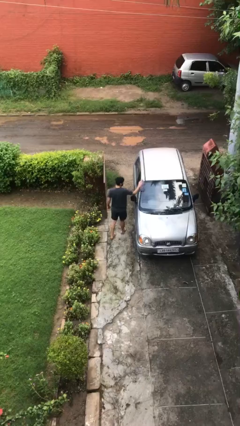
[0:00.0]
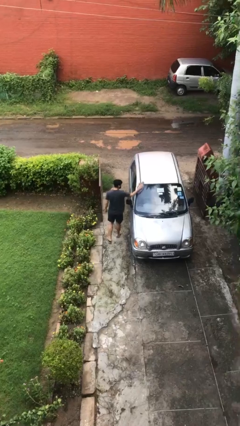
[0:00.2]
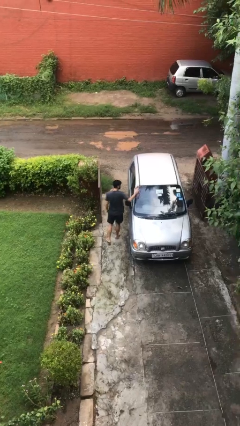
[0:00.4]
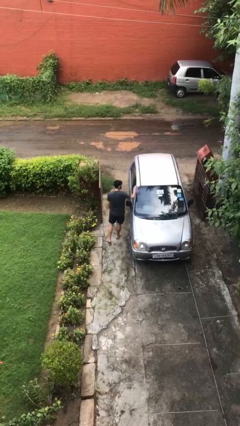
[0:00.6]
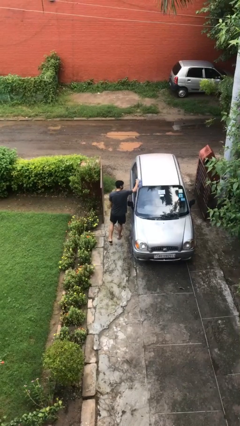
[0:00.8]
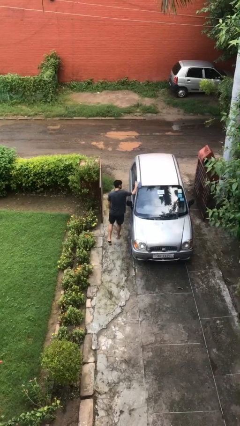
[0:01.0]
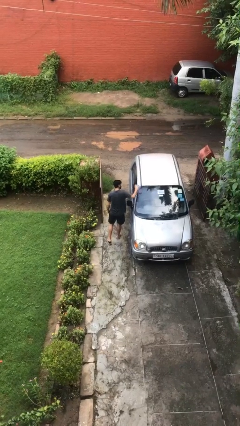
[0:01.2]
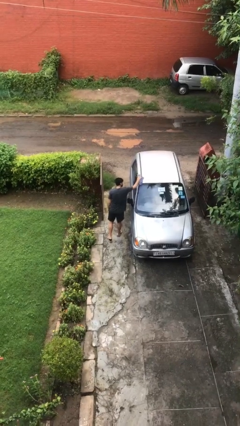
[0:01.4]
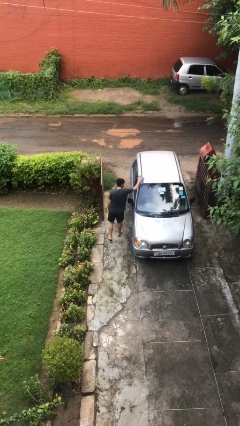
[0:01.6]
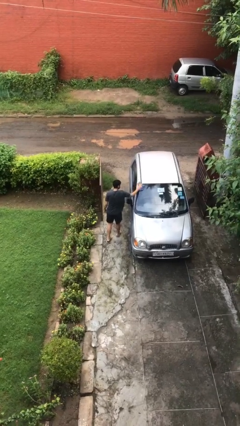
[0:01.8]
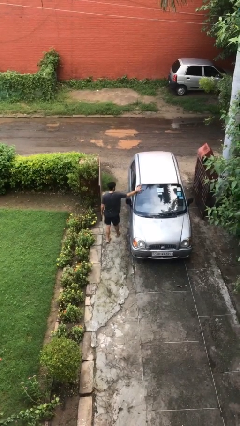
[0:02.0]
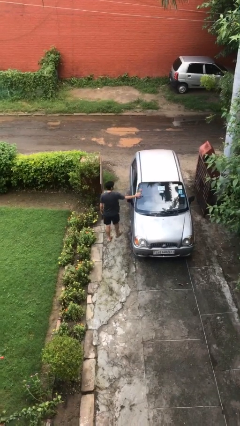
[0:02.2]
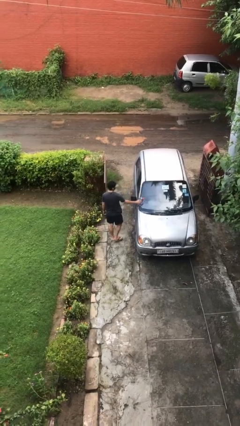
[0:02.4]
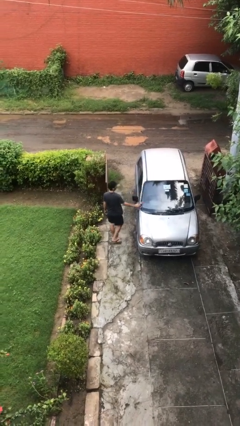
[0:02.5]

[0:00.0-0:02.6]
person polishes car with rag

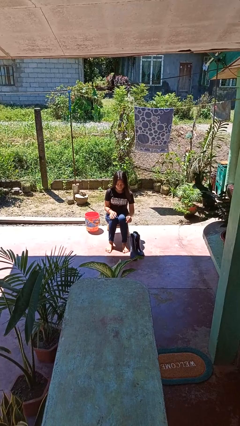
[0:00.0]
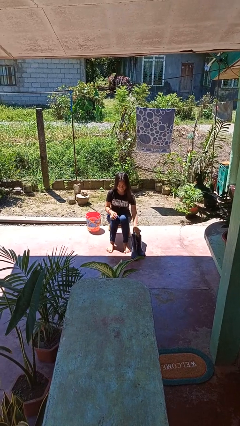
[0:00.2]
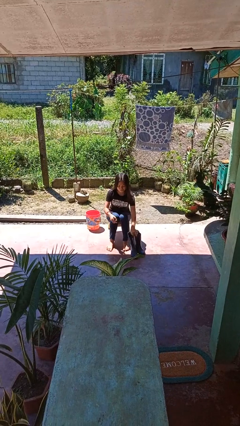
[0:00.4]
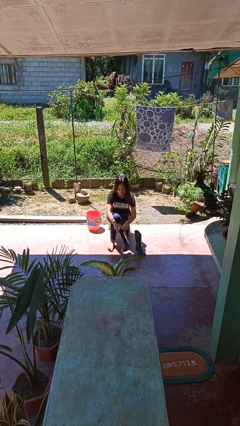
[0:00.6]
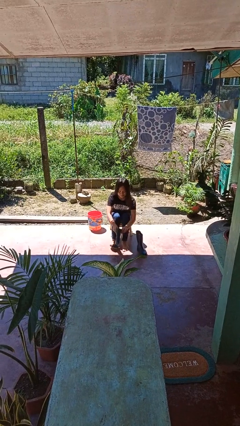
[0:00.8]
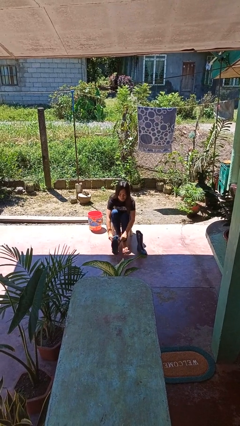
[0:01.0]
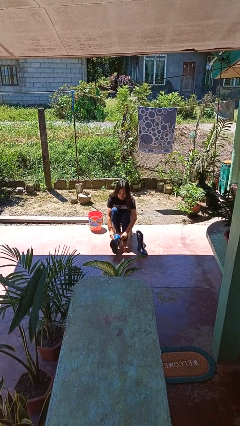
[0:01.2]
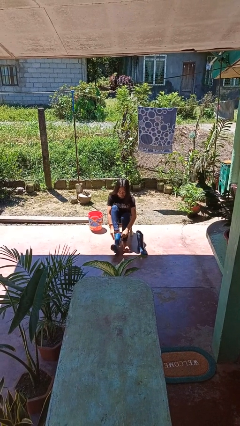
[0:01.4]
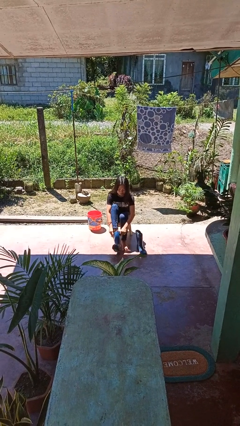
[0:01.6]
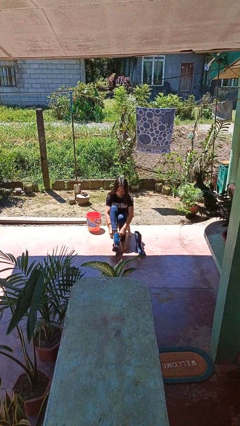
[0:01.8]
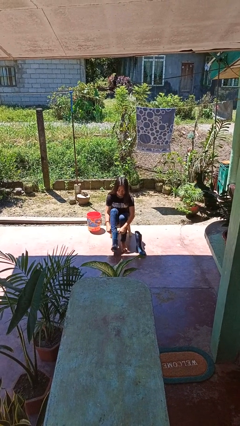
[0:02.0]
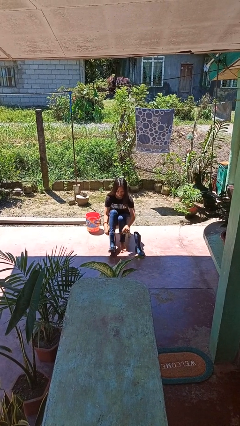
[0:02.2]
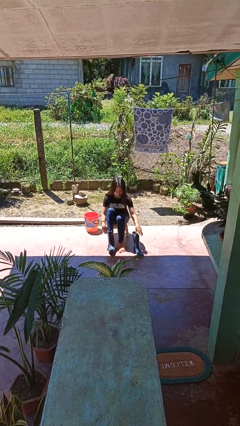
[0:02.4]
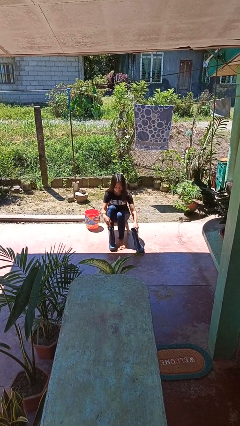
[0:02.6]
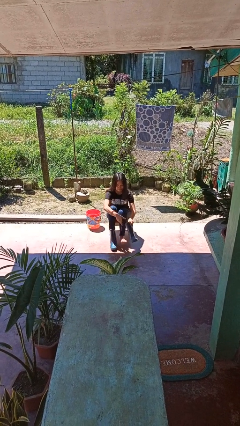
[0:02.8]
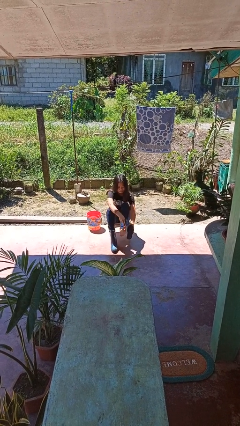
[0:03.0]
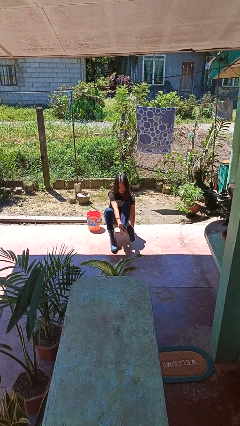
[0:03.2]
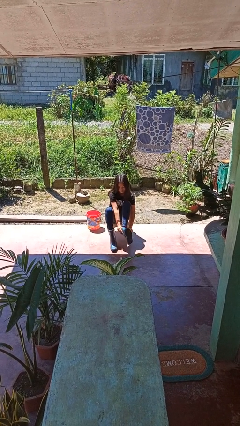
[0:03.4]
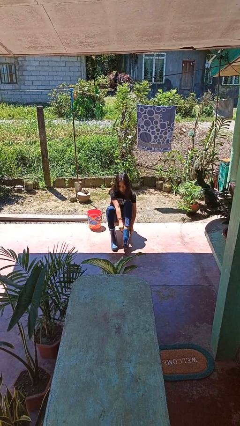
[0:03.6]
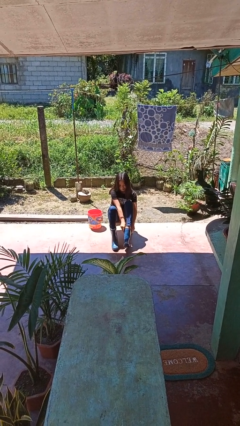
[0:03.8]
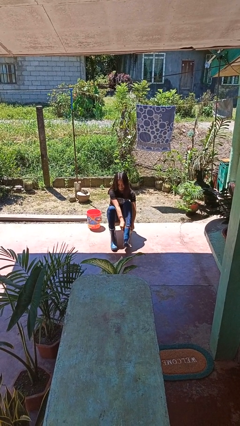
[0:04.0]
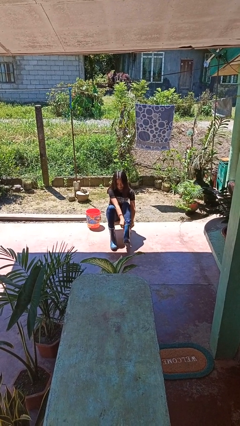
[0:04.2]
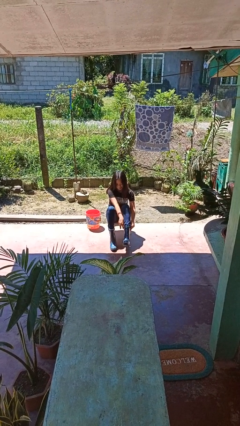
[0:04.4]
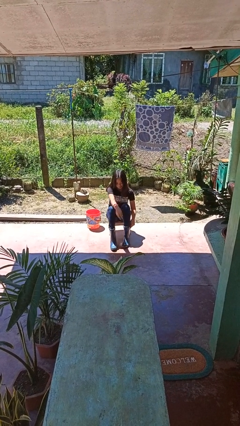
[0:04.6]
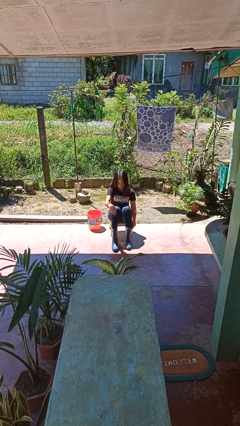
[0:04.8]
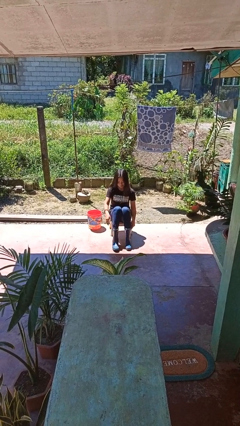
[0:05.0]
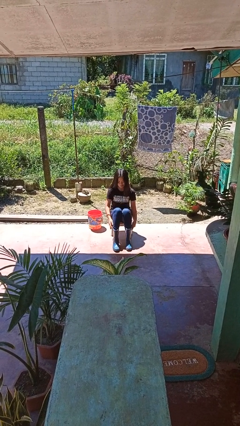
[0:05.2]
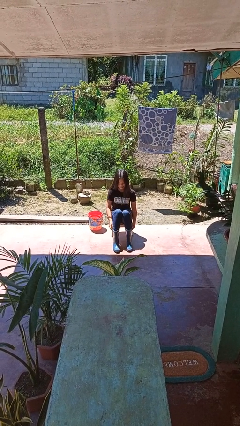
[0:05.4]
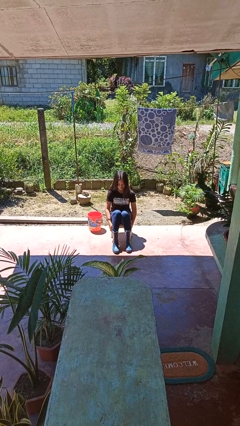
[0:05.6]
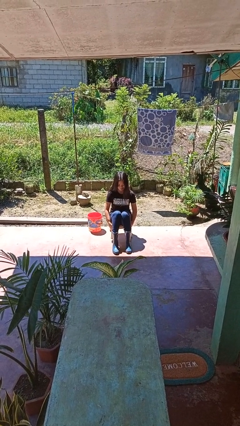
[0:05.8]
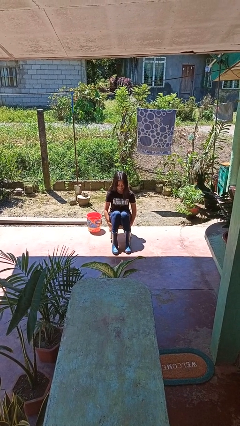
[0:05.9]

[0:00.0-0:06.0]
person puts on boots

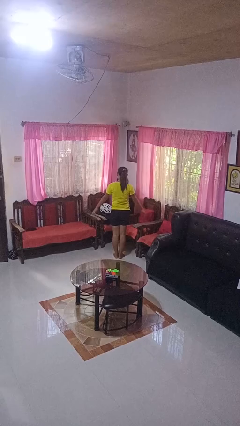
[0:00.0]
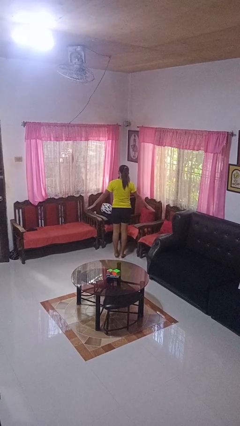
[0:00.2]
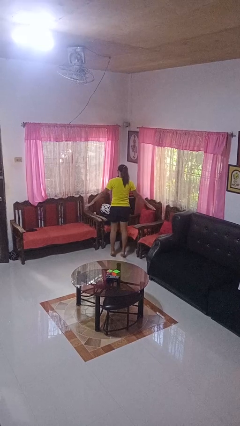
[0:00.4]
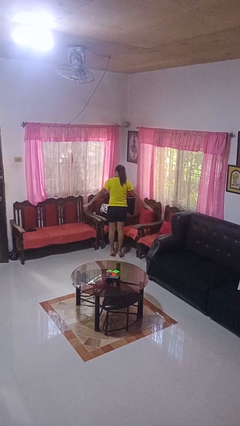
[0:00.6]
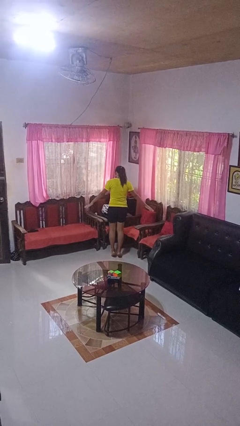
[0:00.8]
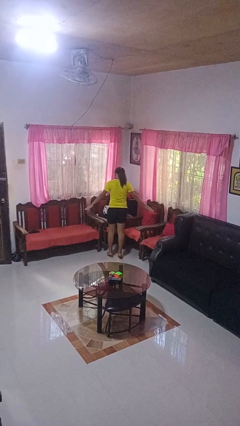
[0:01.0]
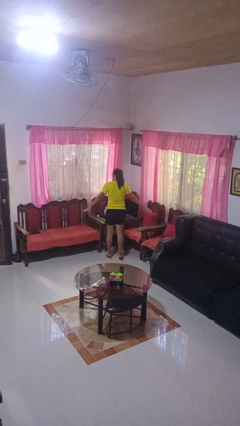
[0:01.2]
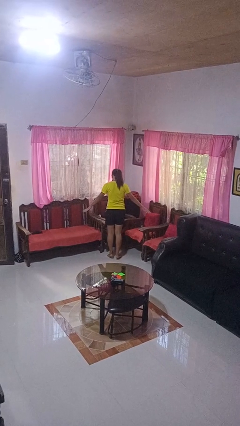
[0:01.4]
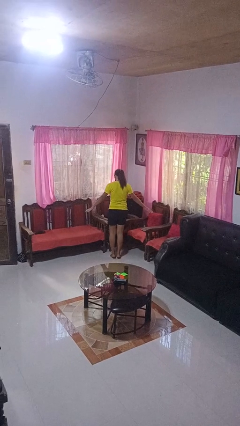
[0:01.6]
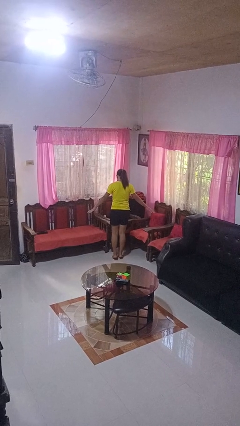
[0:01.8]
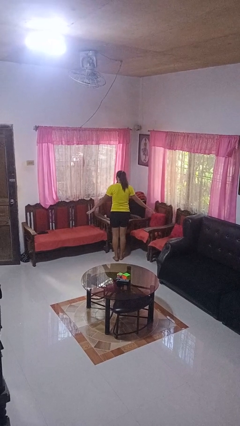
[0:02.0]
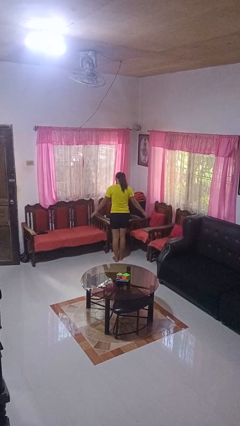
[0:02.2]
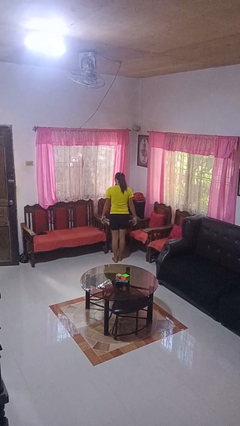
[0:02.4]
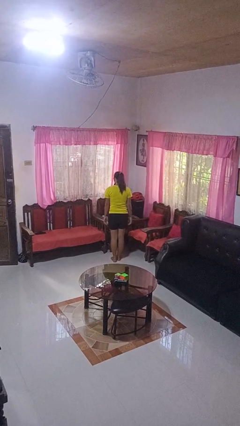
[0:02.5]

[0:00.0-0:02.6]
person walks tiptoe

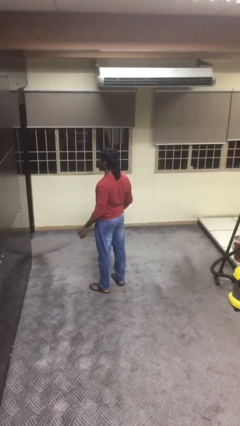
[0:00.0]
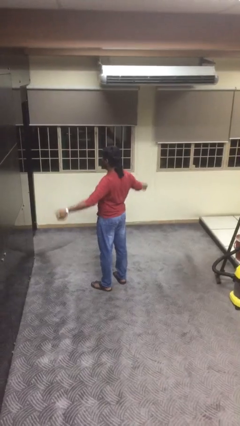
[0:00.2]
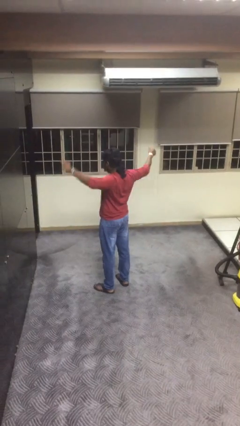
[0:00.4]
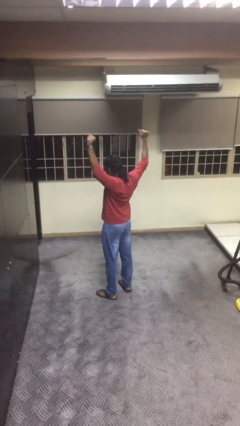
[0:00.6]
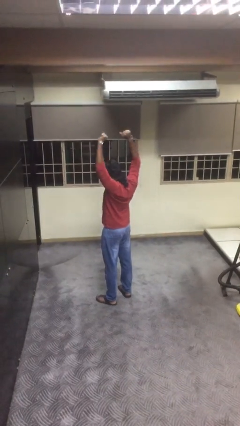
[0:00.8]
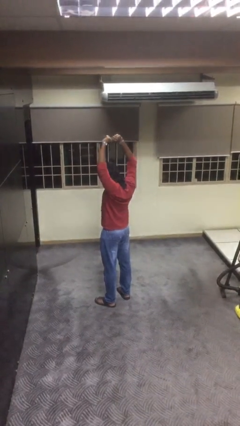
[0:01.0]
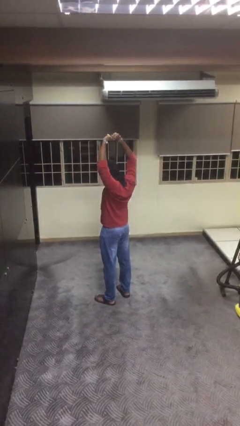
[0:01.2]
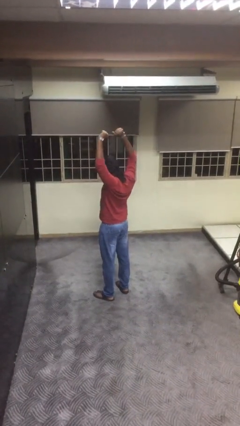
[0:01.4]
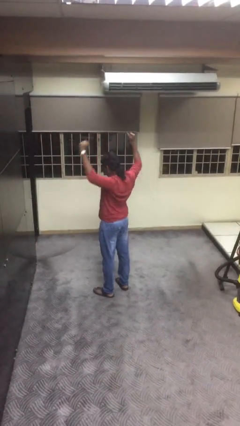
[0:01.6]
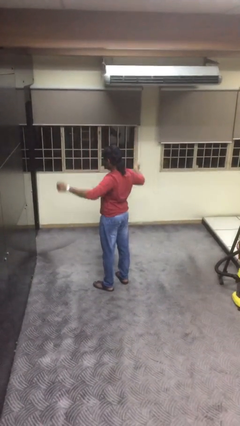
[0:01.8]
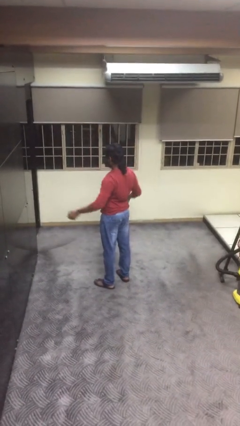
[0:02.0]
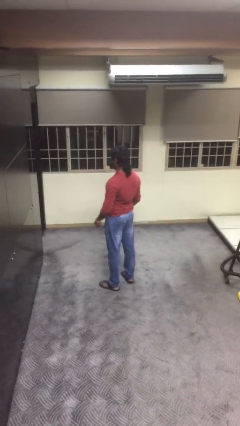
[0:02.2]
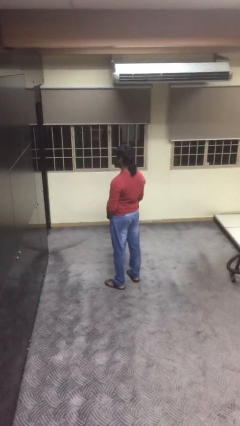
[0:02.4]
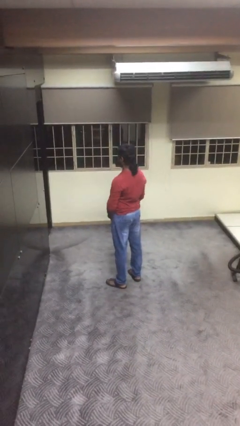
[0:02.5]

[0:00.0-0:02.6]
person stretches arms over head

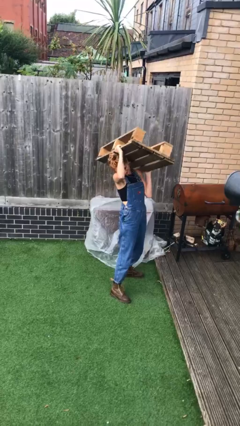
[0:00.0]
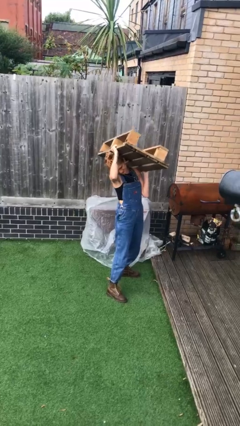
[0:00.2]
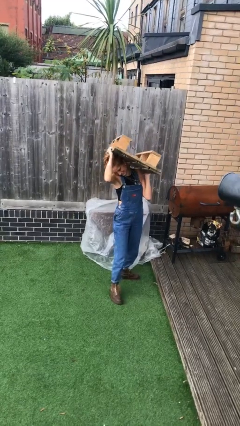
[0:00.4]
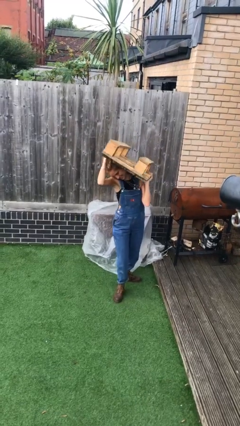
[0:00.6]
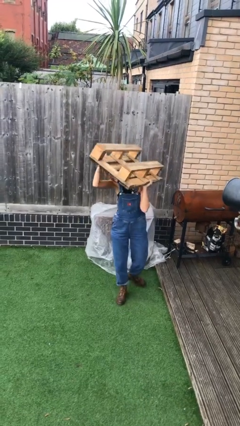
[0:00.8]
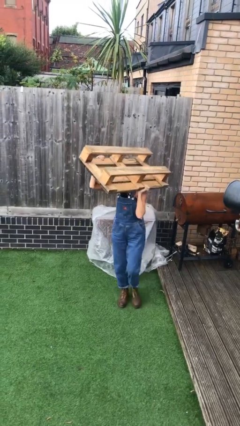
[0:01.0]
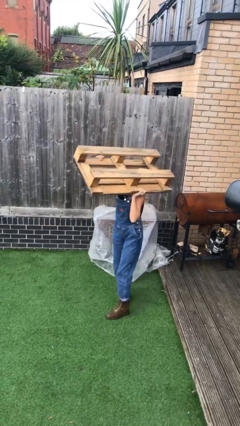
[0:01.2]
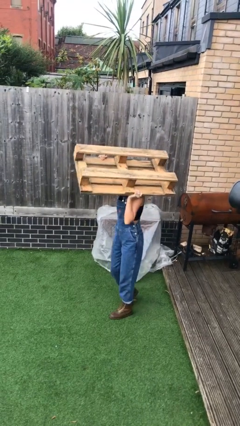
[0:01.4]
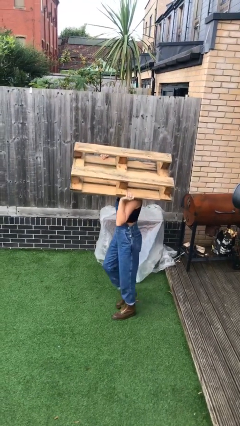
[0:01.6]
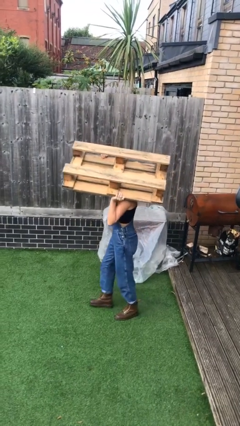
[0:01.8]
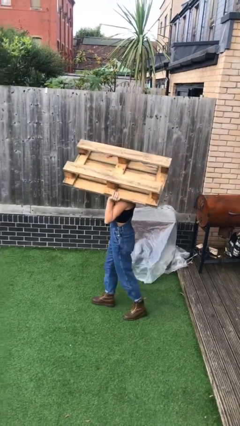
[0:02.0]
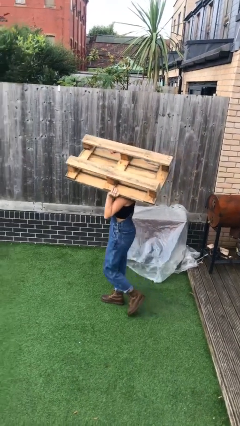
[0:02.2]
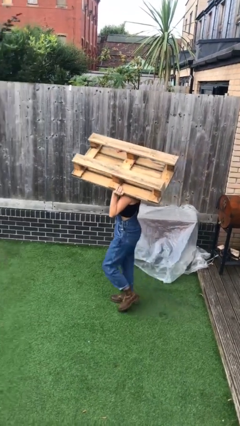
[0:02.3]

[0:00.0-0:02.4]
person carries heavy object

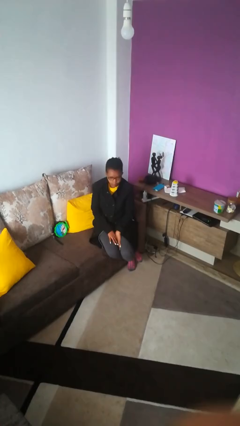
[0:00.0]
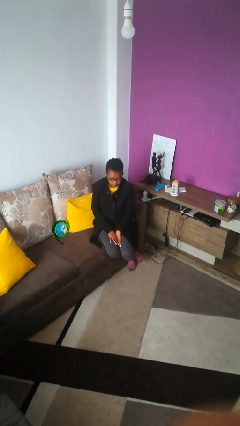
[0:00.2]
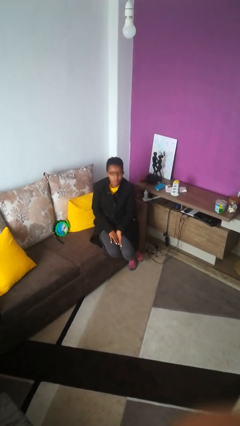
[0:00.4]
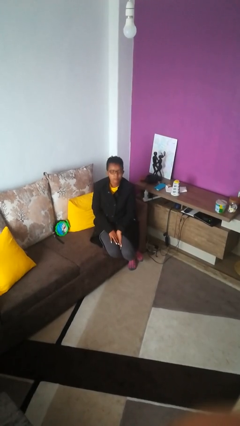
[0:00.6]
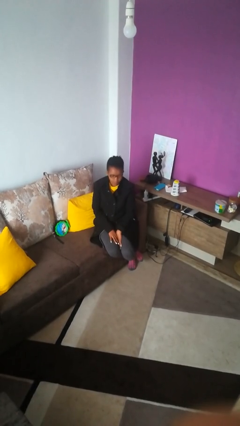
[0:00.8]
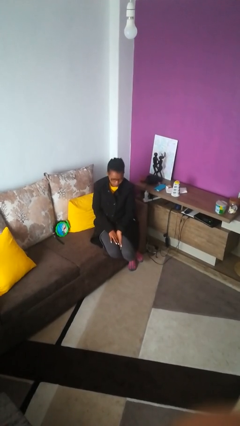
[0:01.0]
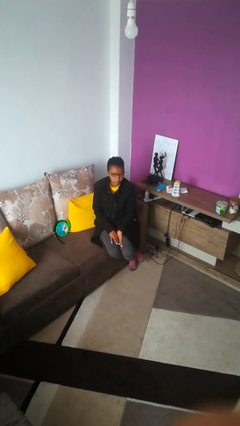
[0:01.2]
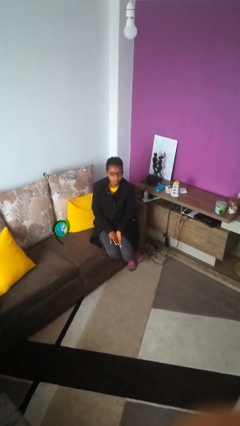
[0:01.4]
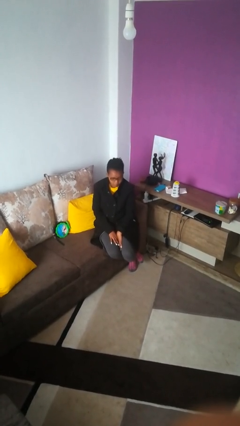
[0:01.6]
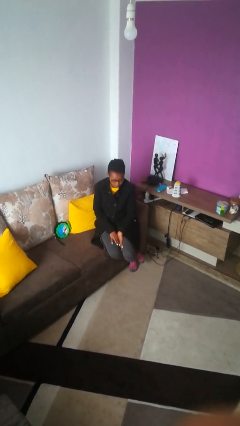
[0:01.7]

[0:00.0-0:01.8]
person nods head
